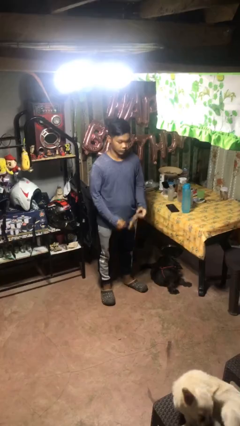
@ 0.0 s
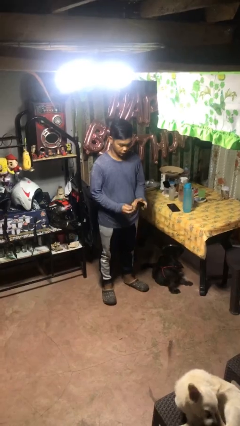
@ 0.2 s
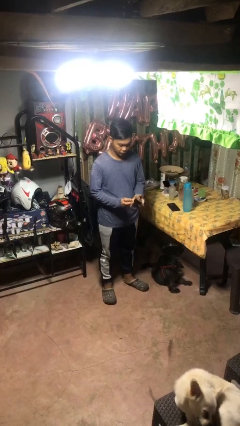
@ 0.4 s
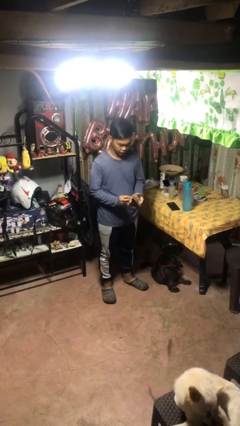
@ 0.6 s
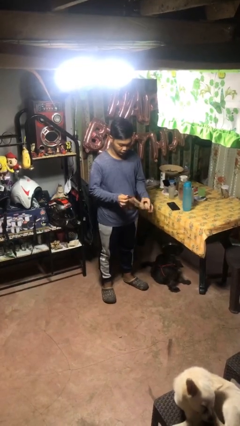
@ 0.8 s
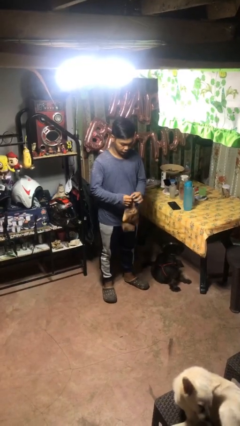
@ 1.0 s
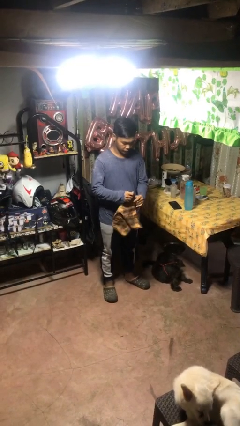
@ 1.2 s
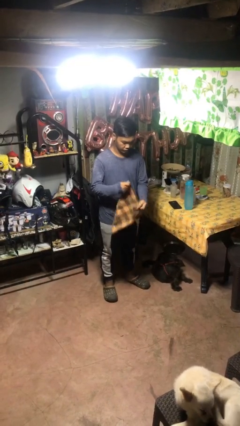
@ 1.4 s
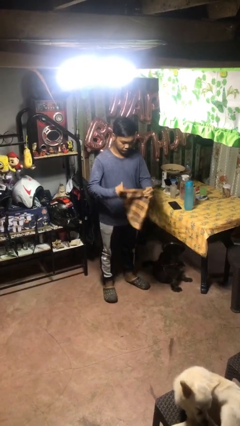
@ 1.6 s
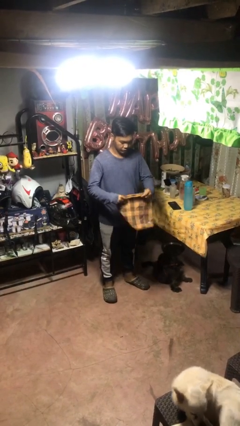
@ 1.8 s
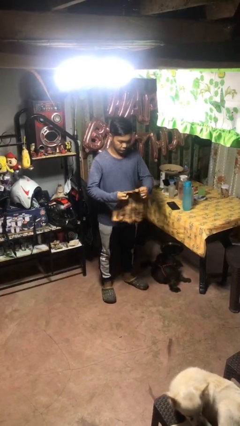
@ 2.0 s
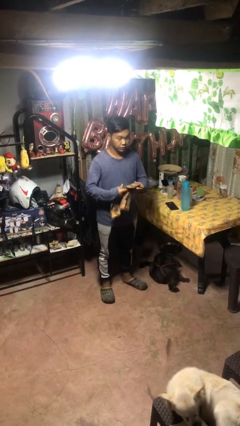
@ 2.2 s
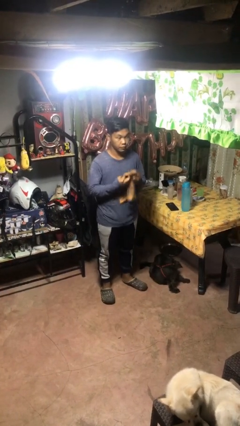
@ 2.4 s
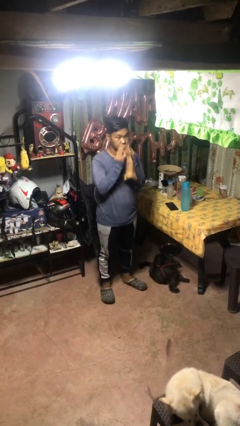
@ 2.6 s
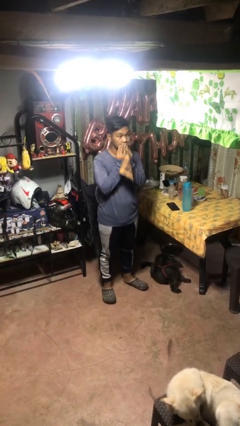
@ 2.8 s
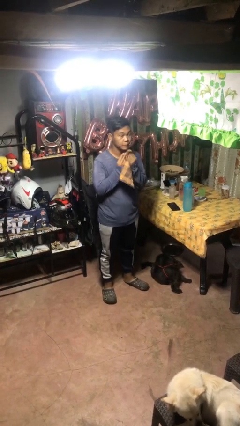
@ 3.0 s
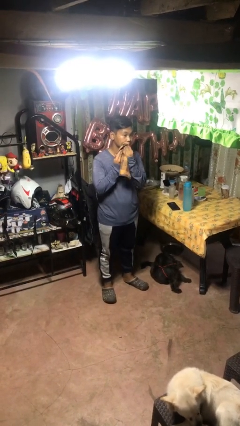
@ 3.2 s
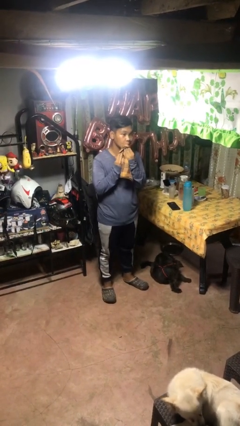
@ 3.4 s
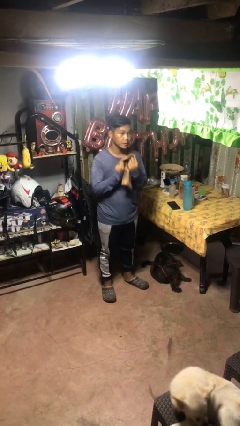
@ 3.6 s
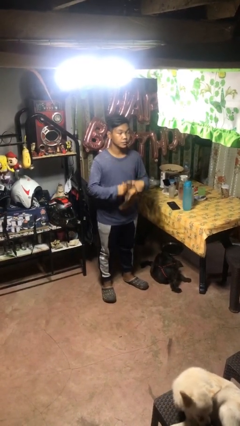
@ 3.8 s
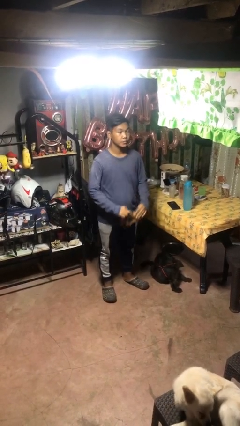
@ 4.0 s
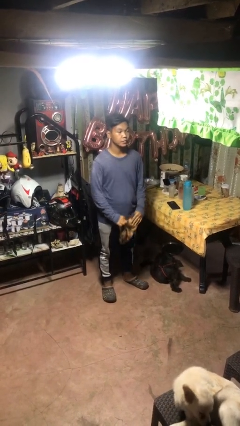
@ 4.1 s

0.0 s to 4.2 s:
person wipes mouth with napkin

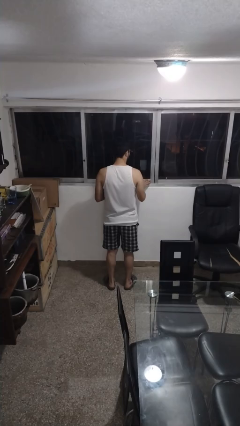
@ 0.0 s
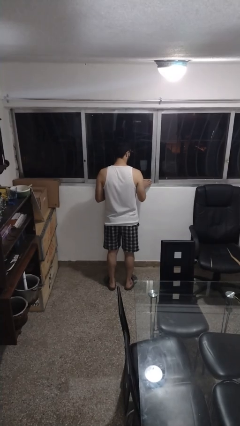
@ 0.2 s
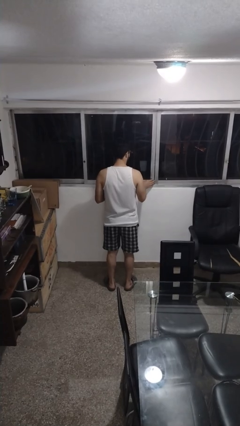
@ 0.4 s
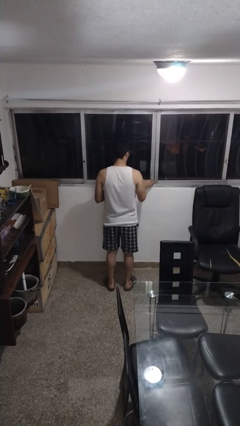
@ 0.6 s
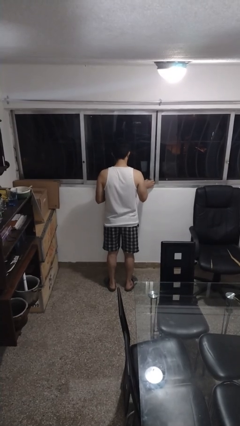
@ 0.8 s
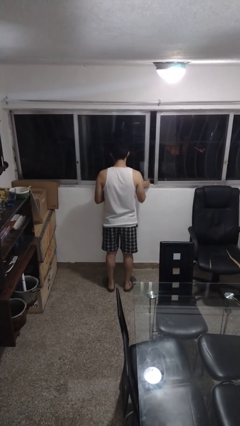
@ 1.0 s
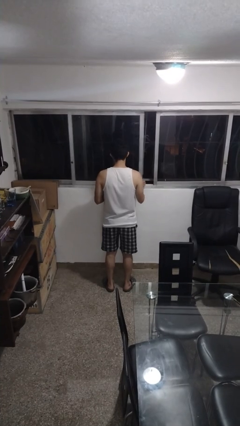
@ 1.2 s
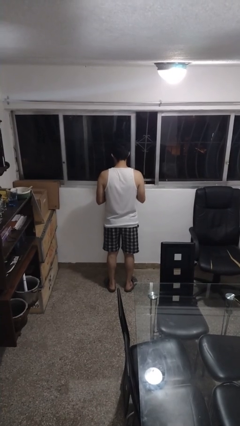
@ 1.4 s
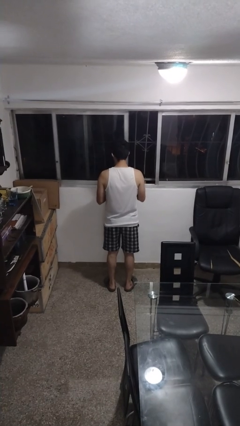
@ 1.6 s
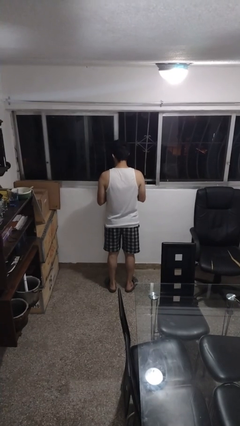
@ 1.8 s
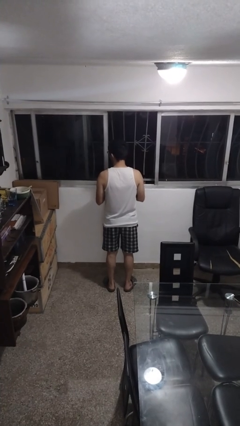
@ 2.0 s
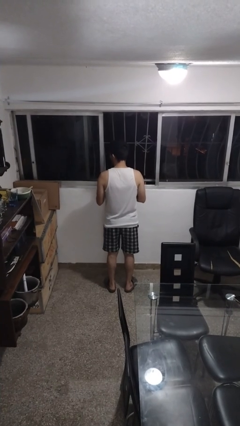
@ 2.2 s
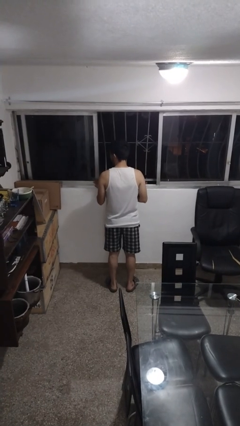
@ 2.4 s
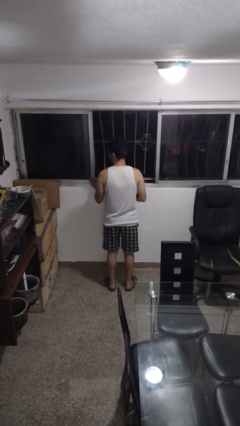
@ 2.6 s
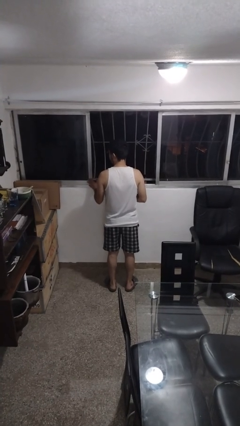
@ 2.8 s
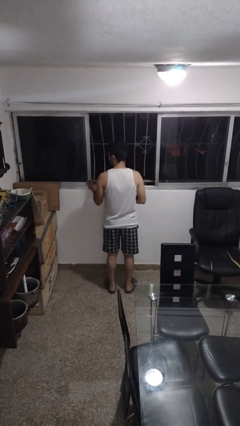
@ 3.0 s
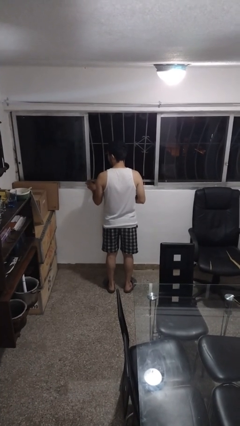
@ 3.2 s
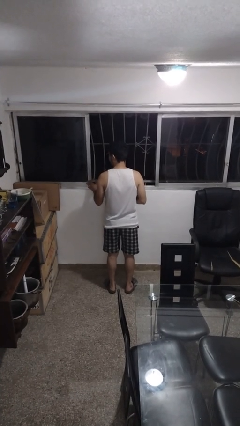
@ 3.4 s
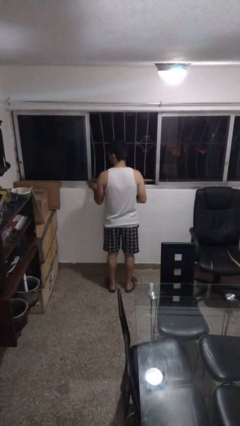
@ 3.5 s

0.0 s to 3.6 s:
person opens home window

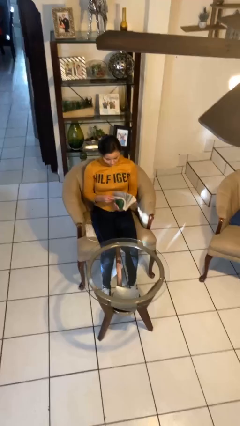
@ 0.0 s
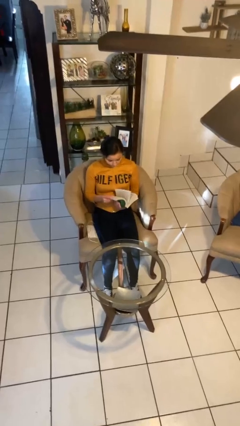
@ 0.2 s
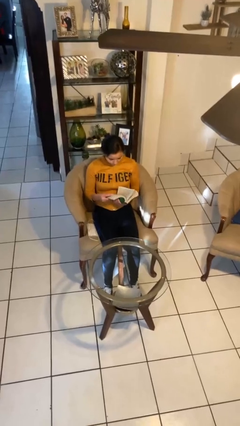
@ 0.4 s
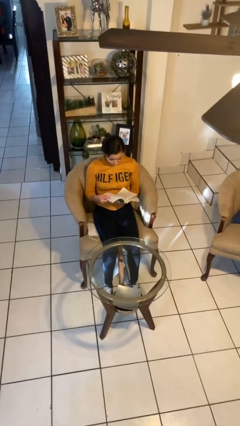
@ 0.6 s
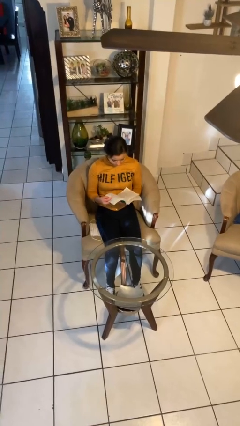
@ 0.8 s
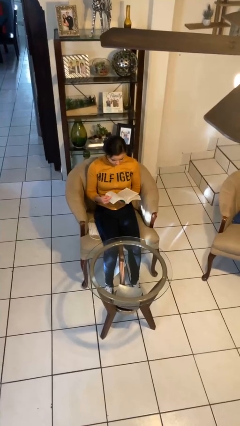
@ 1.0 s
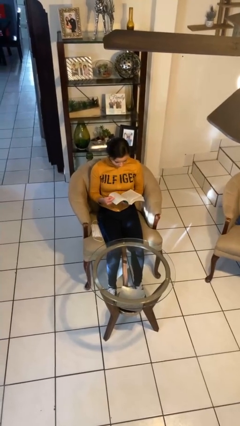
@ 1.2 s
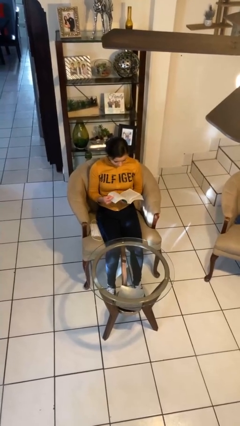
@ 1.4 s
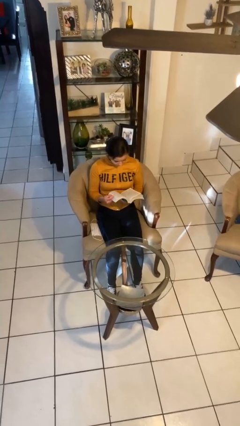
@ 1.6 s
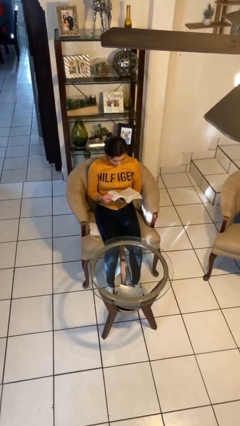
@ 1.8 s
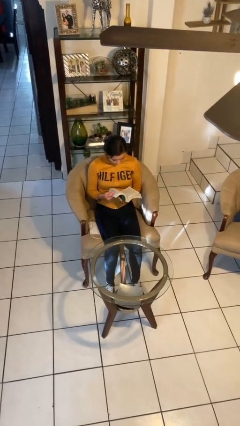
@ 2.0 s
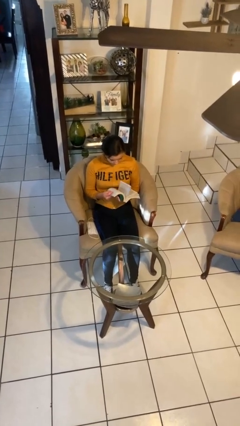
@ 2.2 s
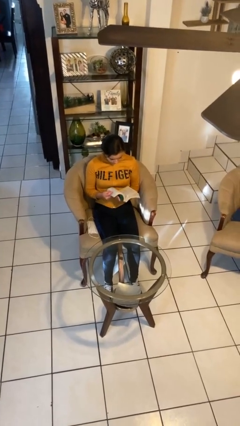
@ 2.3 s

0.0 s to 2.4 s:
person reads book

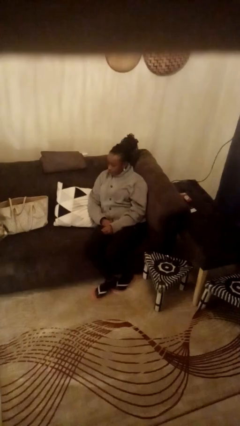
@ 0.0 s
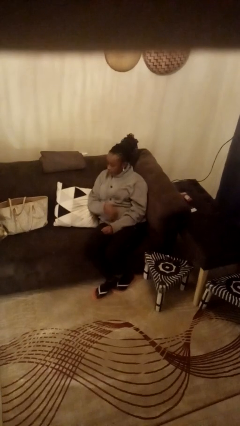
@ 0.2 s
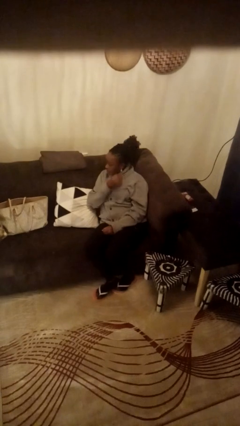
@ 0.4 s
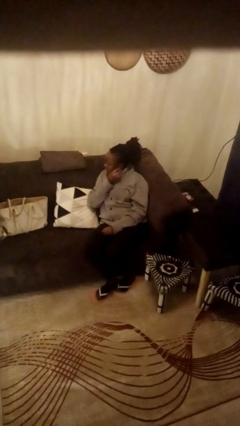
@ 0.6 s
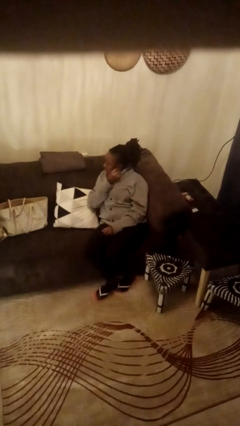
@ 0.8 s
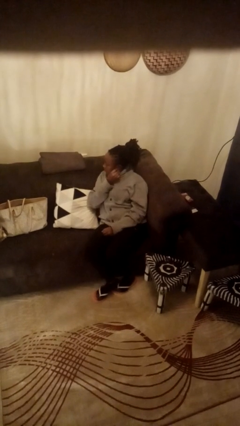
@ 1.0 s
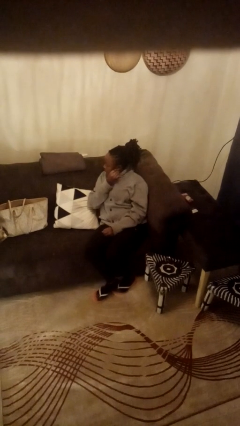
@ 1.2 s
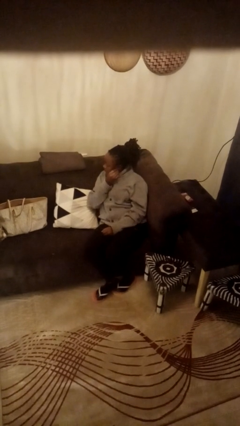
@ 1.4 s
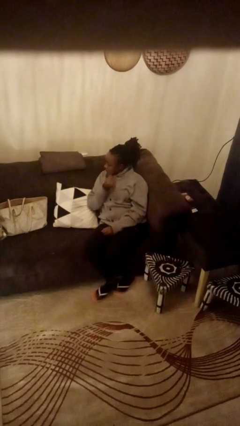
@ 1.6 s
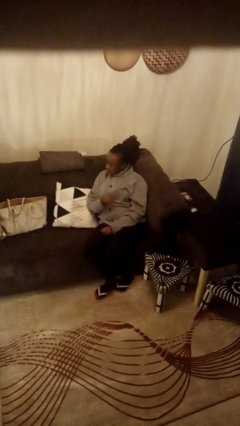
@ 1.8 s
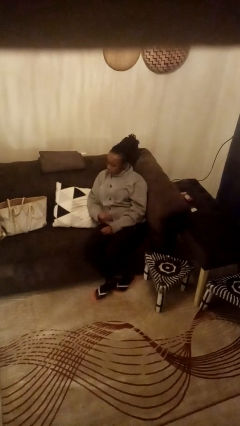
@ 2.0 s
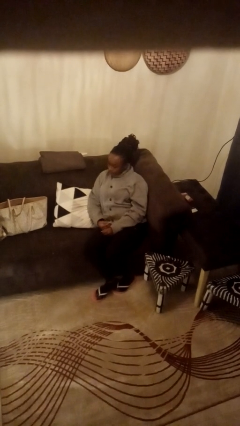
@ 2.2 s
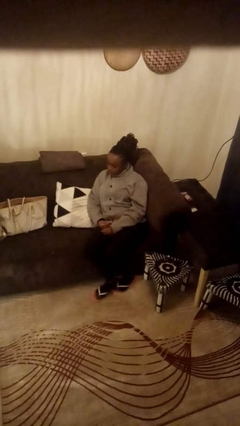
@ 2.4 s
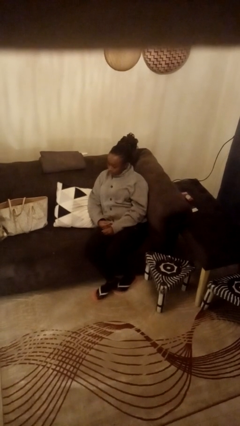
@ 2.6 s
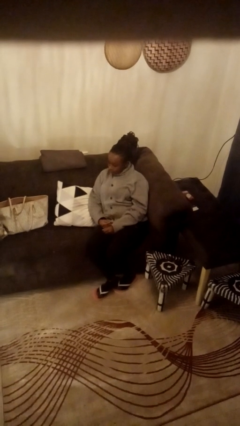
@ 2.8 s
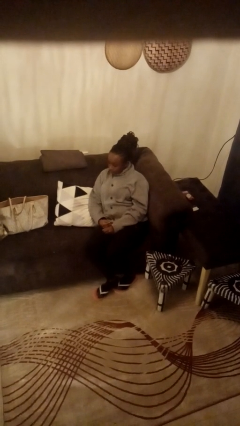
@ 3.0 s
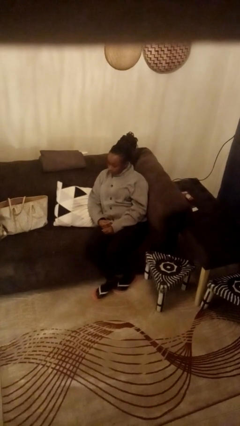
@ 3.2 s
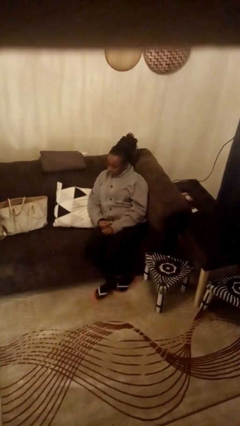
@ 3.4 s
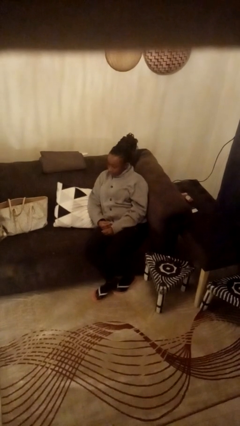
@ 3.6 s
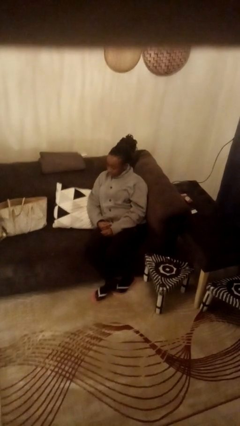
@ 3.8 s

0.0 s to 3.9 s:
person takes off earrings

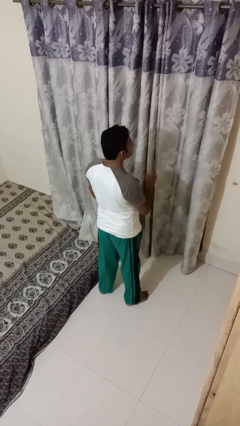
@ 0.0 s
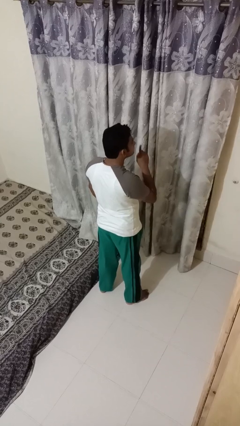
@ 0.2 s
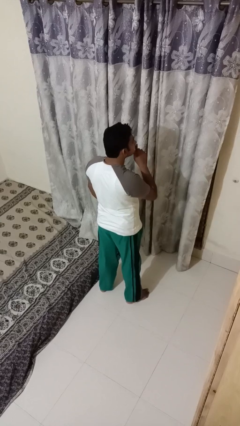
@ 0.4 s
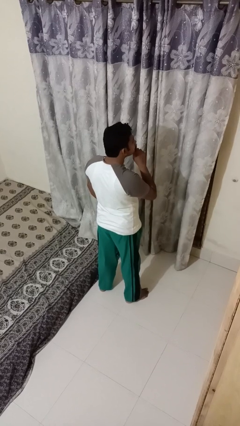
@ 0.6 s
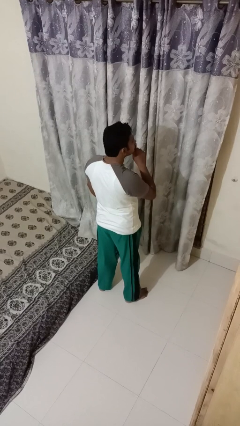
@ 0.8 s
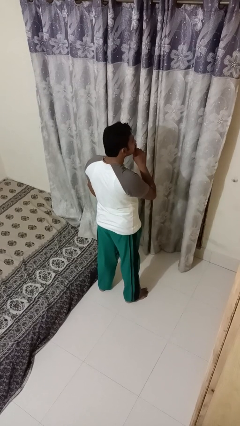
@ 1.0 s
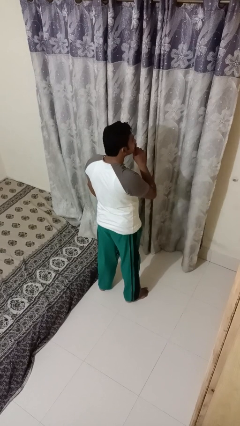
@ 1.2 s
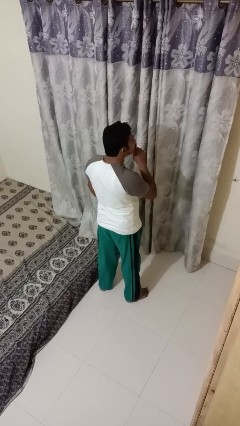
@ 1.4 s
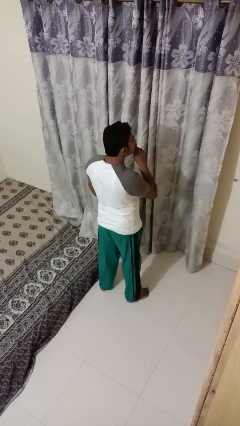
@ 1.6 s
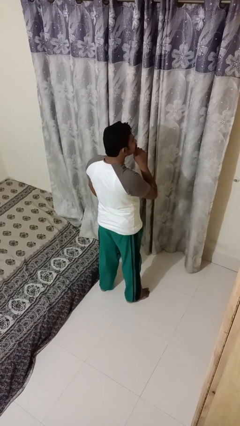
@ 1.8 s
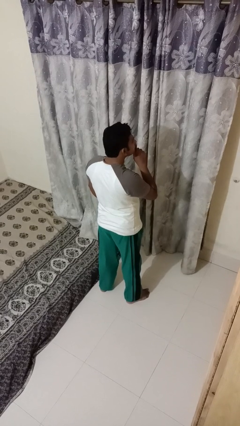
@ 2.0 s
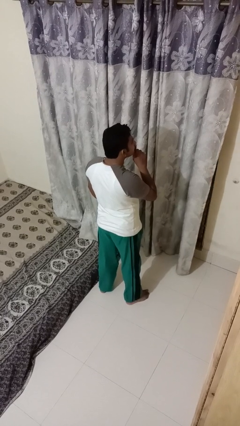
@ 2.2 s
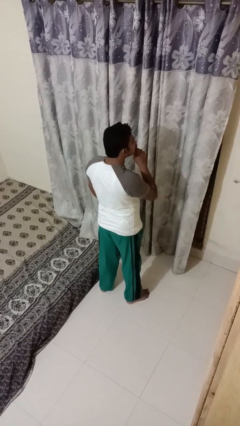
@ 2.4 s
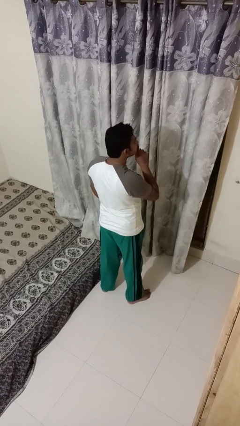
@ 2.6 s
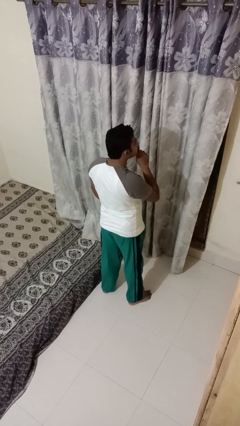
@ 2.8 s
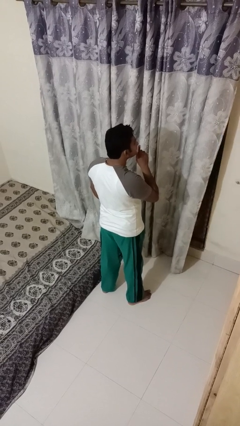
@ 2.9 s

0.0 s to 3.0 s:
person gestures be quiet
